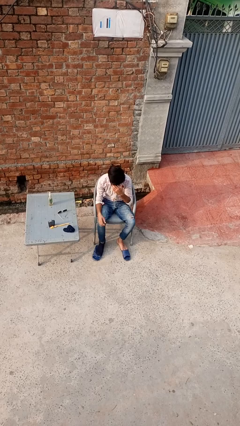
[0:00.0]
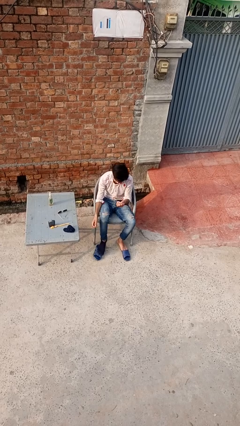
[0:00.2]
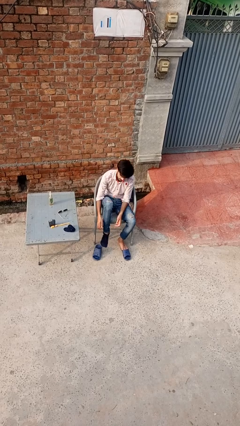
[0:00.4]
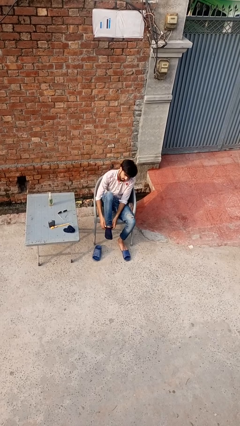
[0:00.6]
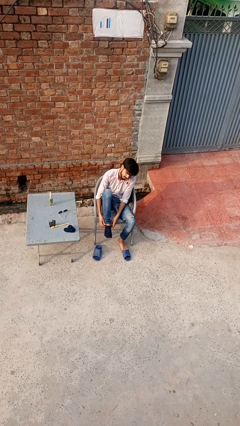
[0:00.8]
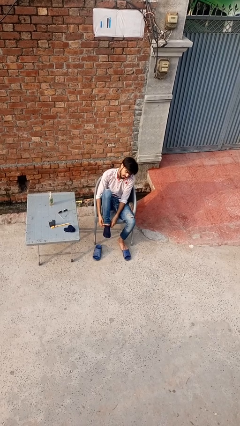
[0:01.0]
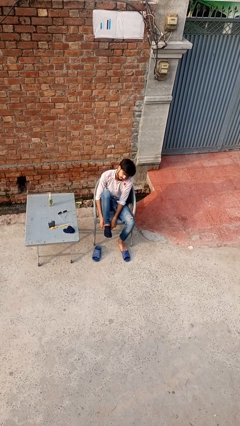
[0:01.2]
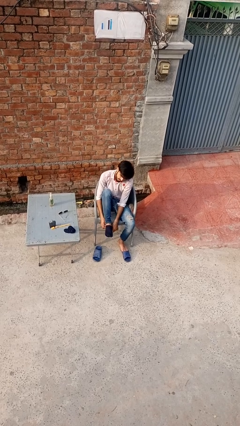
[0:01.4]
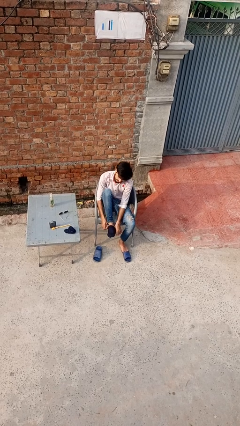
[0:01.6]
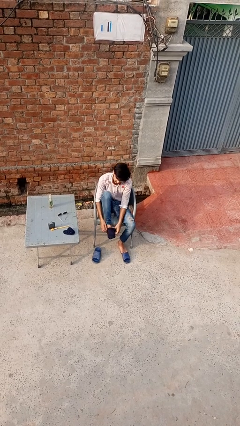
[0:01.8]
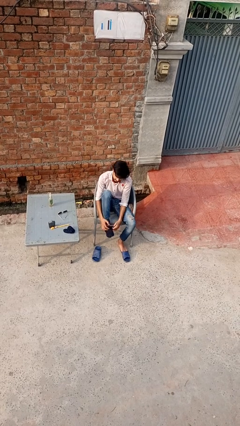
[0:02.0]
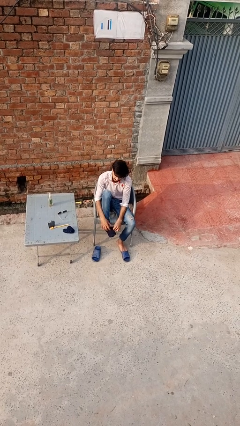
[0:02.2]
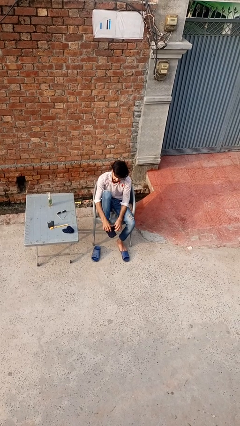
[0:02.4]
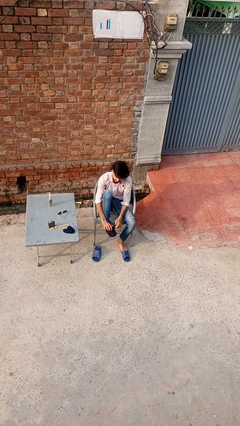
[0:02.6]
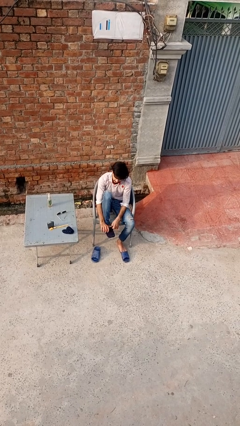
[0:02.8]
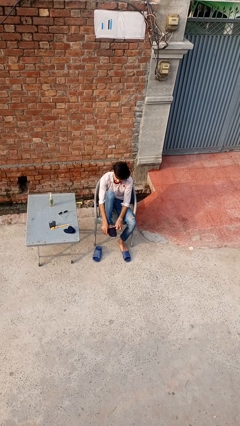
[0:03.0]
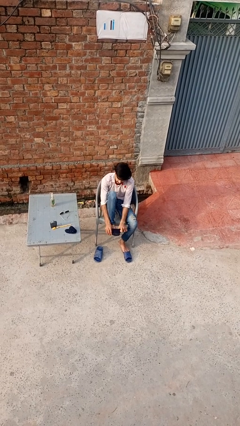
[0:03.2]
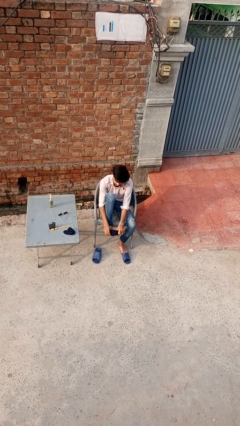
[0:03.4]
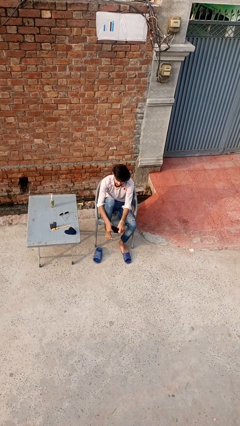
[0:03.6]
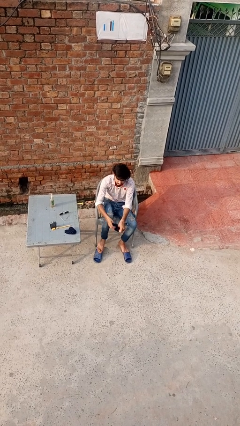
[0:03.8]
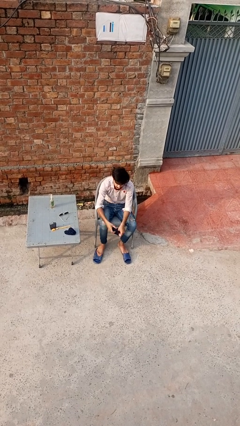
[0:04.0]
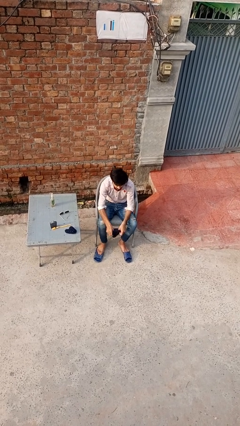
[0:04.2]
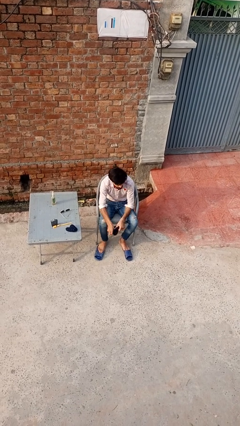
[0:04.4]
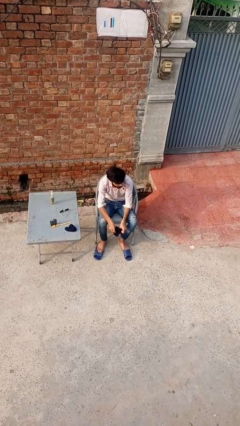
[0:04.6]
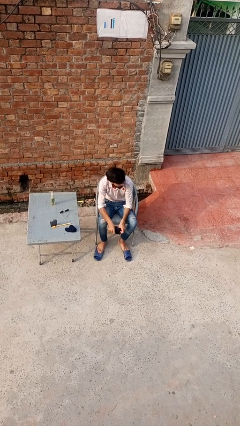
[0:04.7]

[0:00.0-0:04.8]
person takes off socks

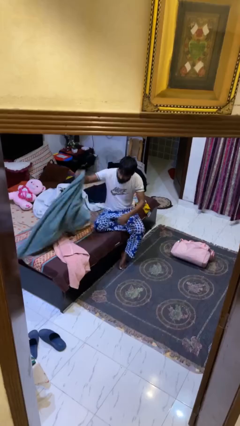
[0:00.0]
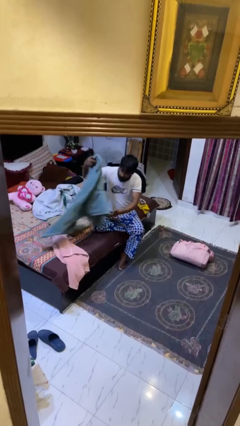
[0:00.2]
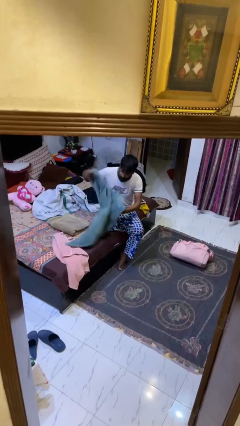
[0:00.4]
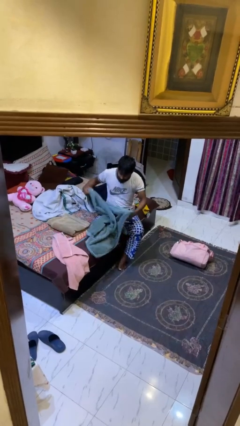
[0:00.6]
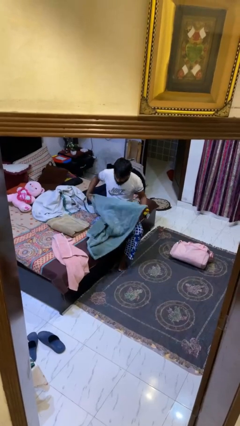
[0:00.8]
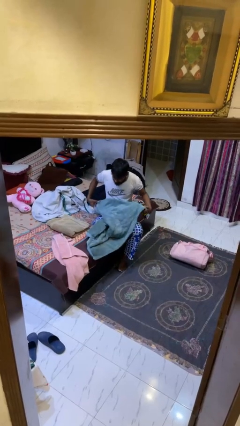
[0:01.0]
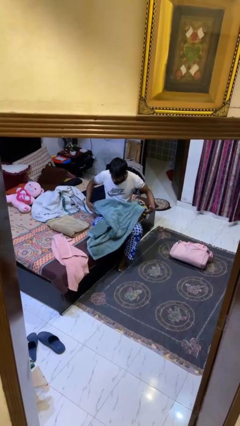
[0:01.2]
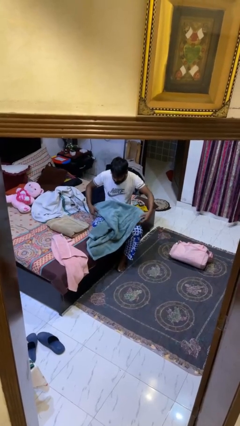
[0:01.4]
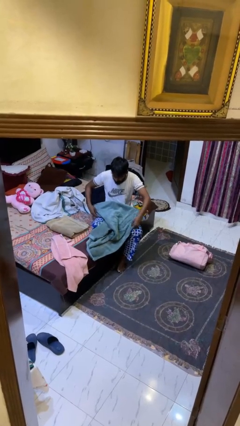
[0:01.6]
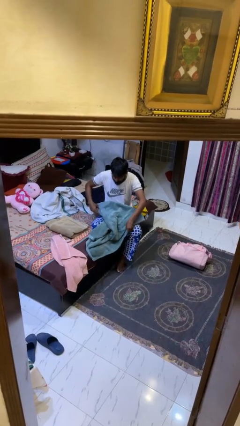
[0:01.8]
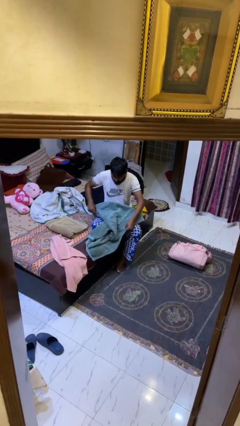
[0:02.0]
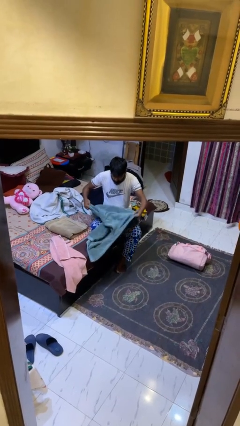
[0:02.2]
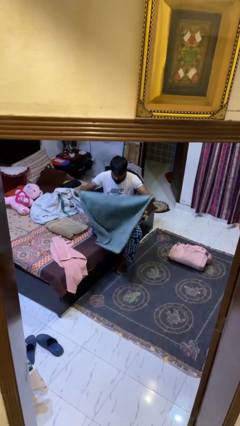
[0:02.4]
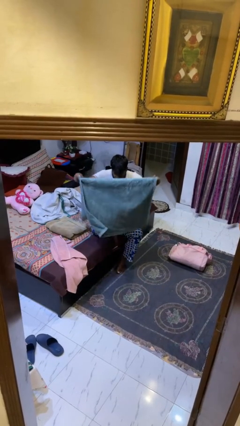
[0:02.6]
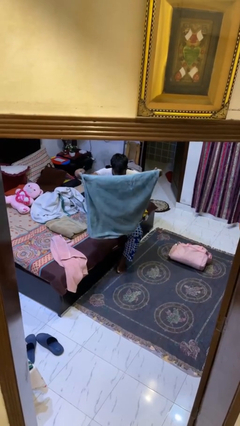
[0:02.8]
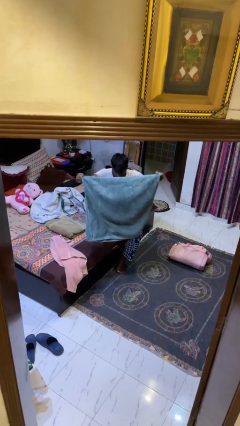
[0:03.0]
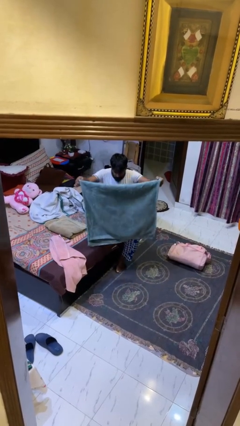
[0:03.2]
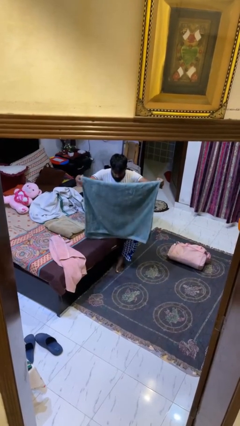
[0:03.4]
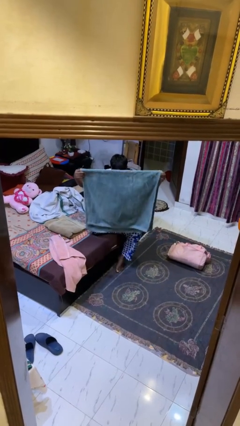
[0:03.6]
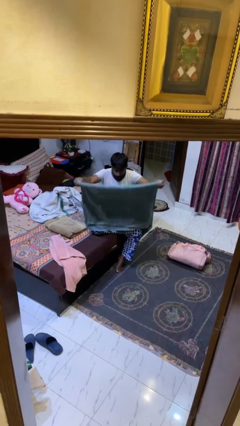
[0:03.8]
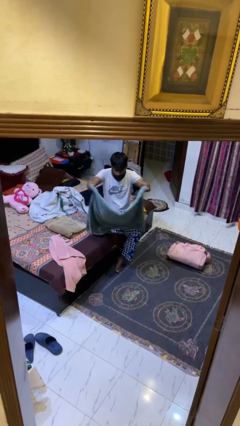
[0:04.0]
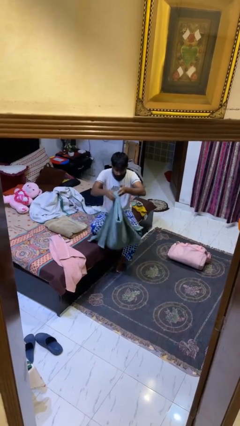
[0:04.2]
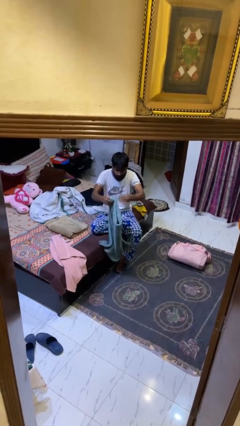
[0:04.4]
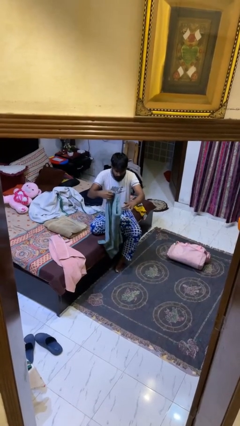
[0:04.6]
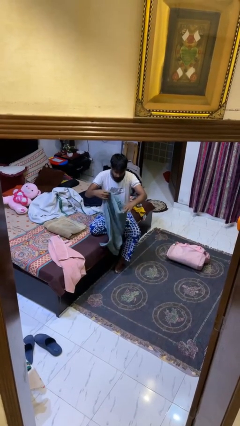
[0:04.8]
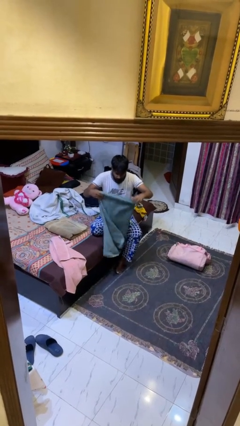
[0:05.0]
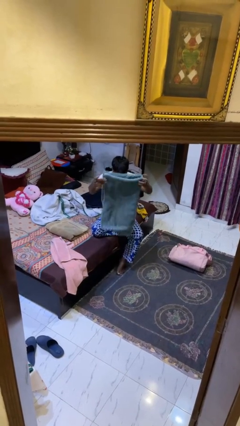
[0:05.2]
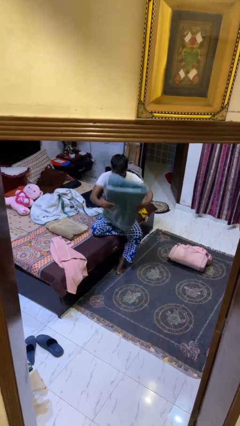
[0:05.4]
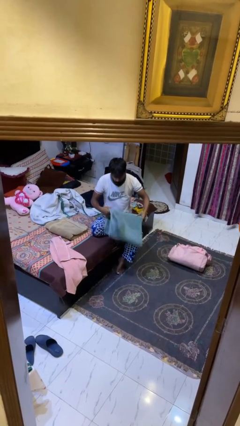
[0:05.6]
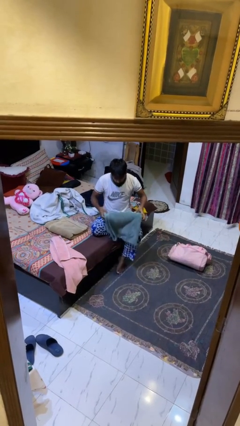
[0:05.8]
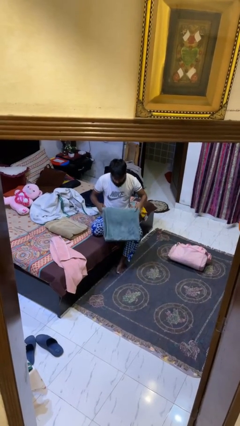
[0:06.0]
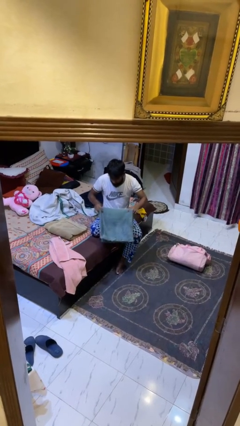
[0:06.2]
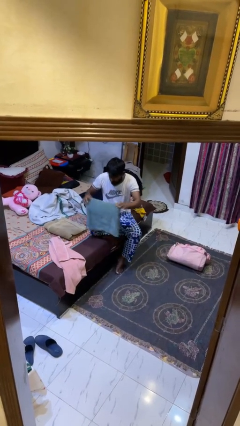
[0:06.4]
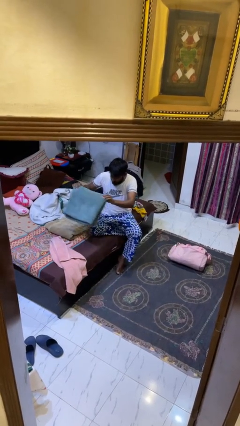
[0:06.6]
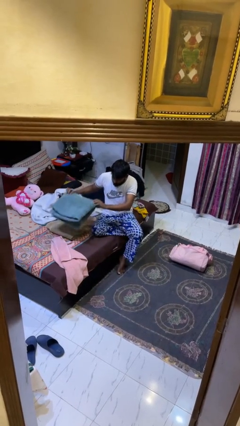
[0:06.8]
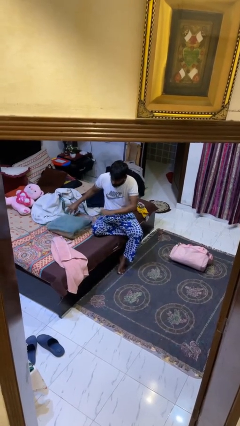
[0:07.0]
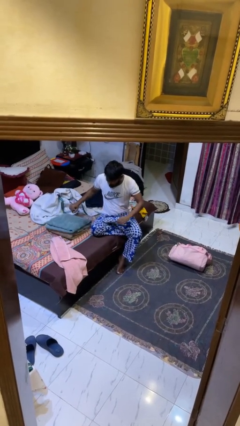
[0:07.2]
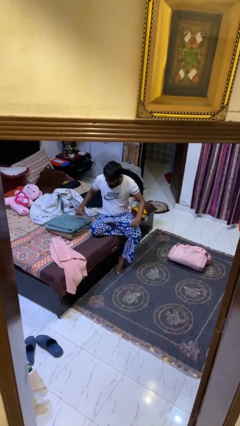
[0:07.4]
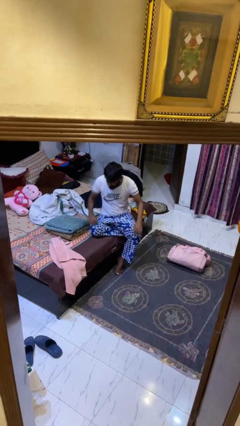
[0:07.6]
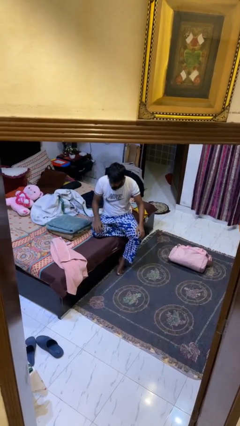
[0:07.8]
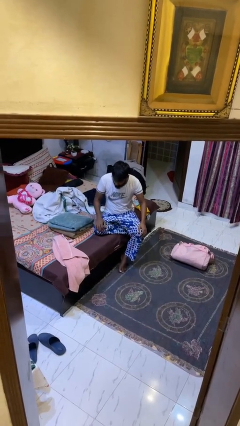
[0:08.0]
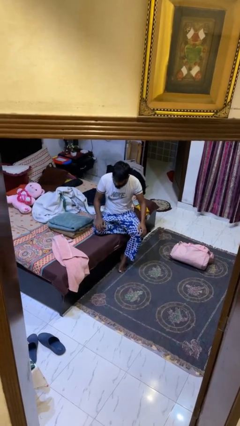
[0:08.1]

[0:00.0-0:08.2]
person folds towel

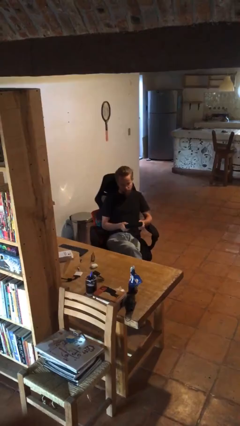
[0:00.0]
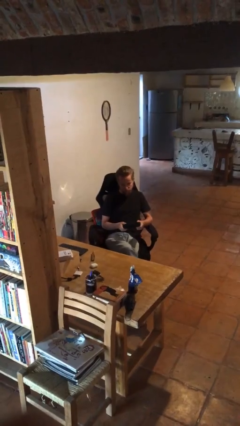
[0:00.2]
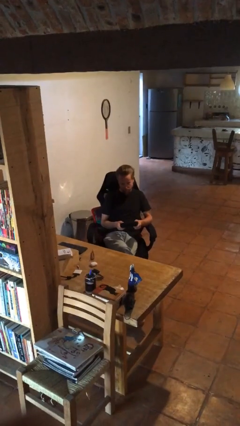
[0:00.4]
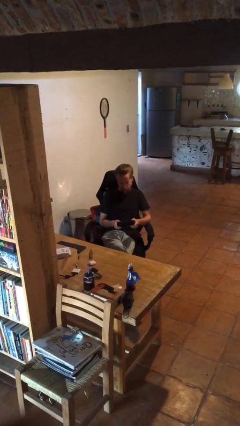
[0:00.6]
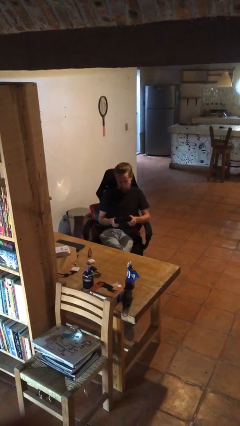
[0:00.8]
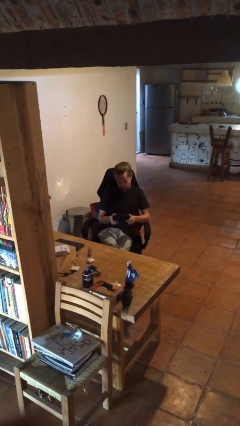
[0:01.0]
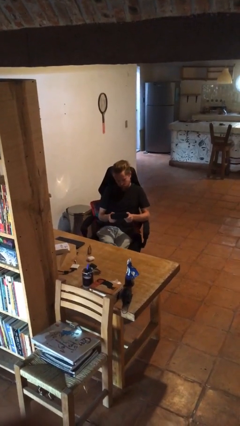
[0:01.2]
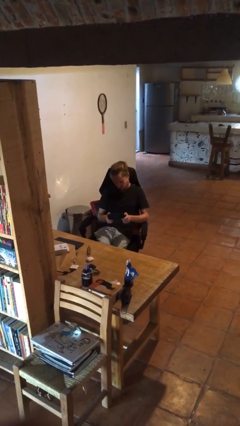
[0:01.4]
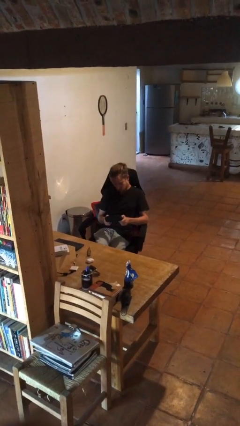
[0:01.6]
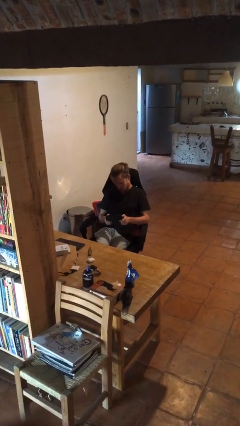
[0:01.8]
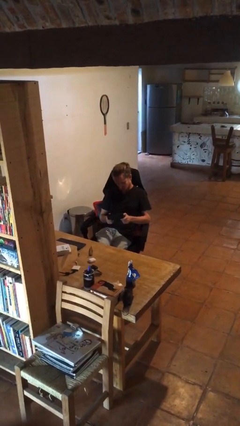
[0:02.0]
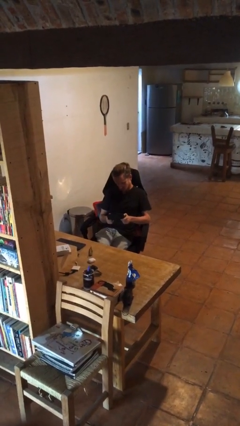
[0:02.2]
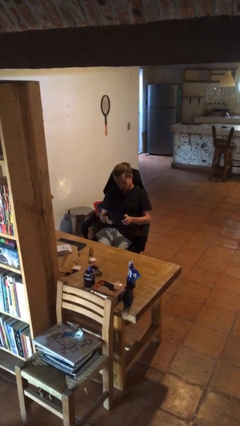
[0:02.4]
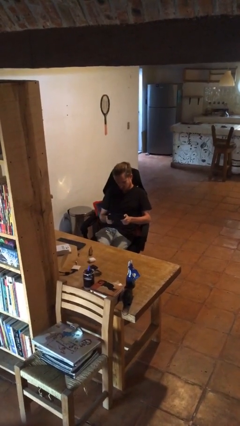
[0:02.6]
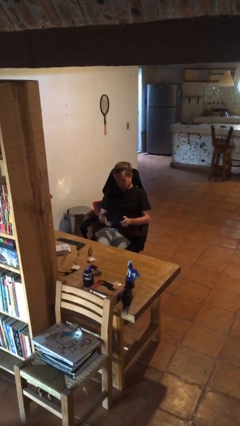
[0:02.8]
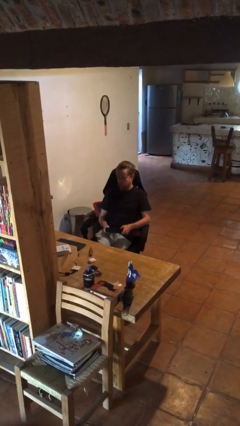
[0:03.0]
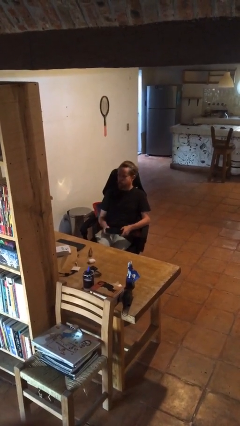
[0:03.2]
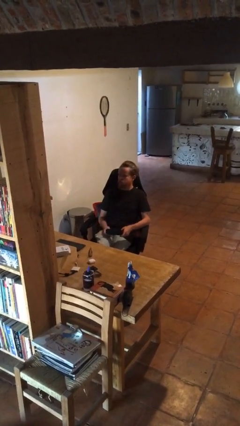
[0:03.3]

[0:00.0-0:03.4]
person interacts with handheld game

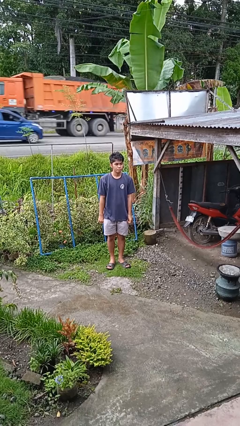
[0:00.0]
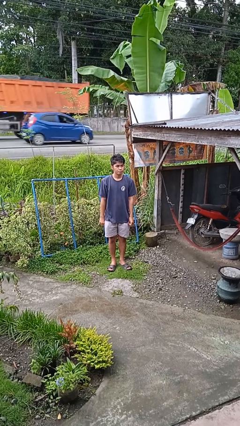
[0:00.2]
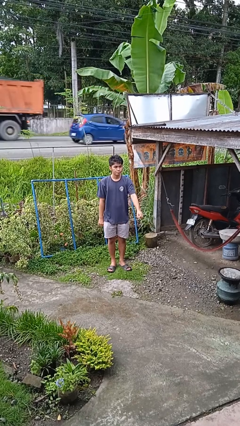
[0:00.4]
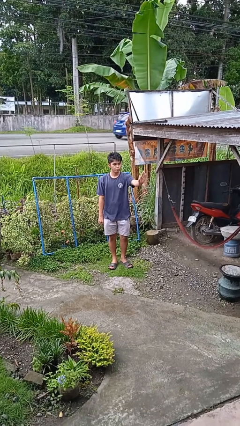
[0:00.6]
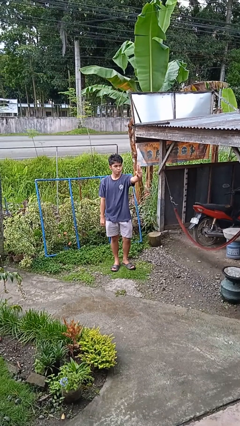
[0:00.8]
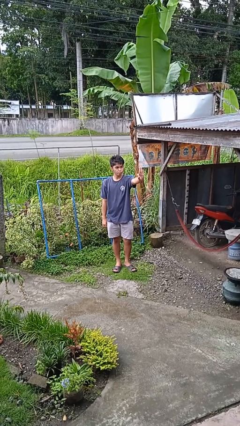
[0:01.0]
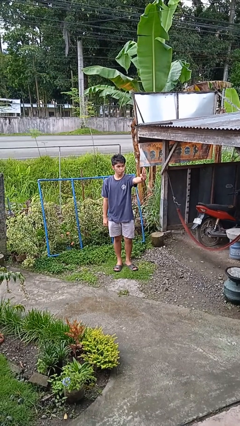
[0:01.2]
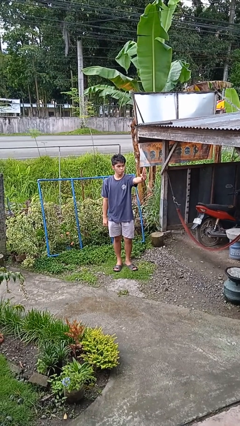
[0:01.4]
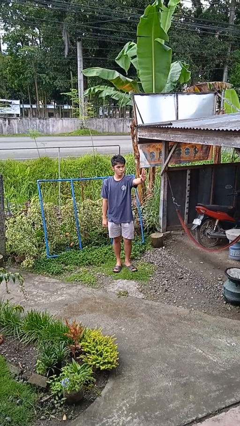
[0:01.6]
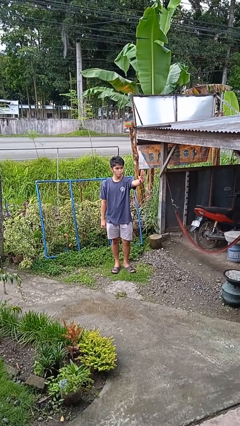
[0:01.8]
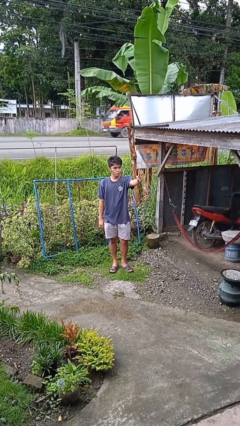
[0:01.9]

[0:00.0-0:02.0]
person gestures number three
